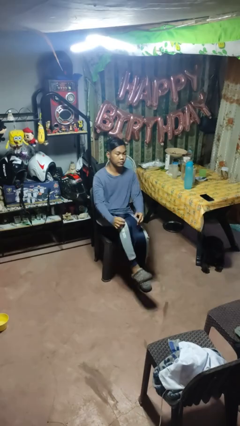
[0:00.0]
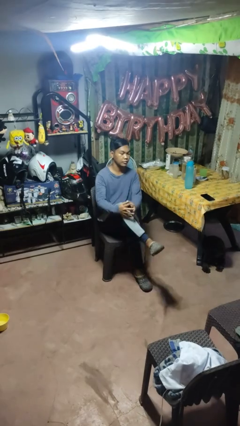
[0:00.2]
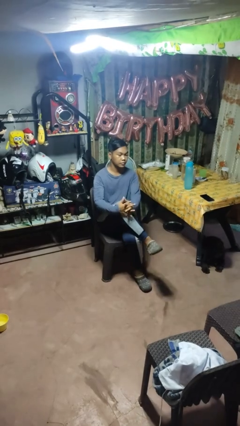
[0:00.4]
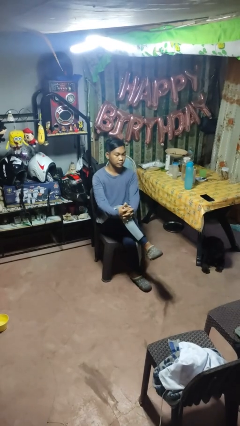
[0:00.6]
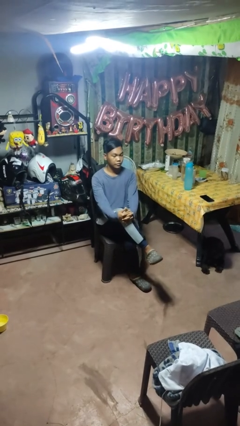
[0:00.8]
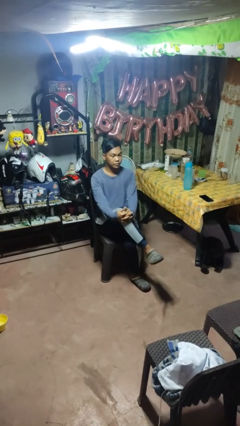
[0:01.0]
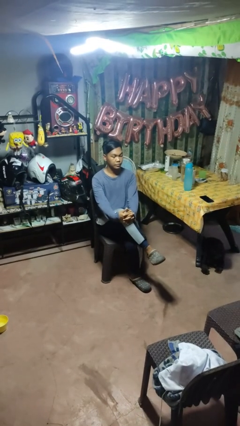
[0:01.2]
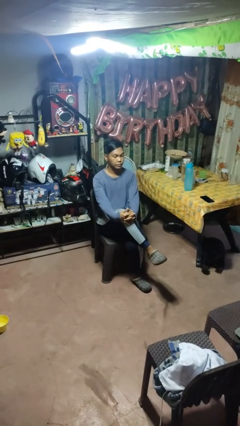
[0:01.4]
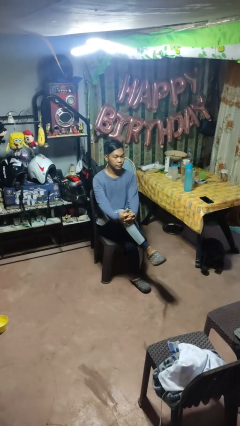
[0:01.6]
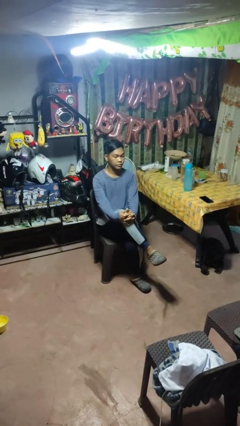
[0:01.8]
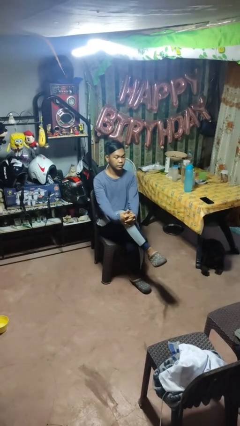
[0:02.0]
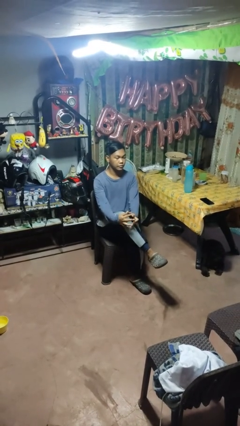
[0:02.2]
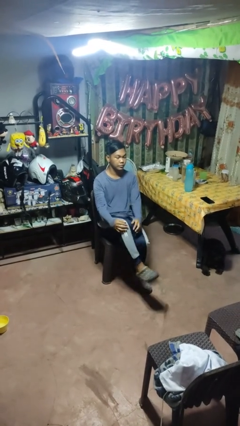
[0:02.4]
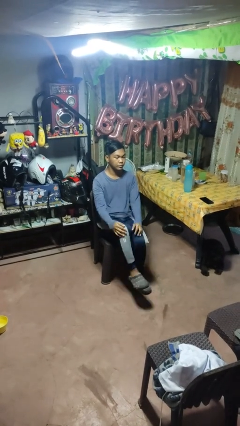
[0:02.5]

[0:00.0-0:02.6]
person crosses legs

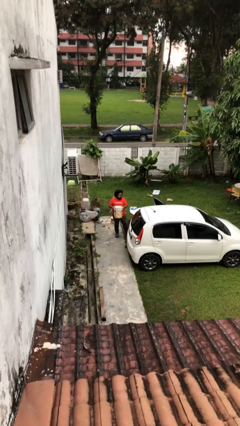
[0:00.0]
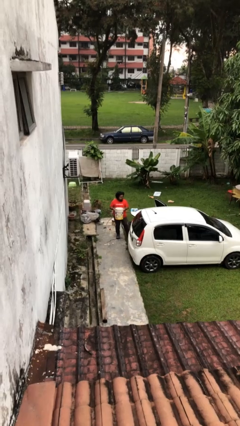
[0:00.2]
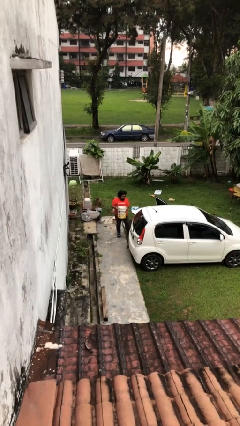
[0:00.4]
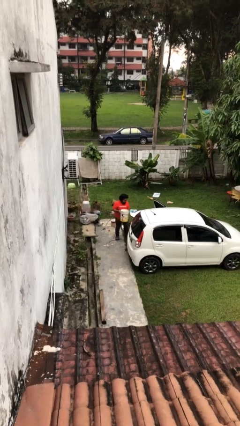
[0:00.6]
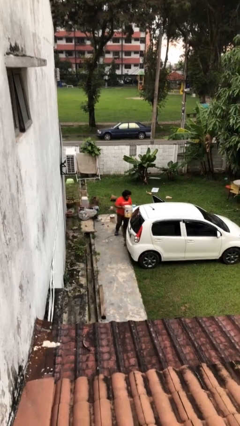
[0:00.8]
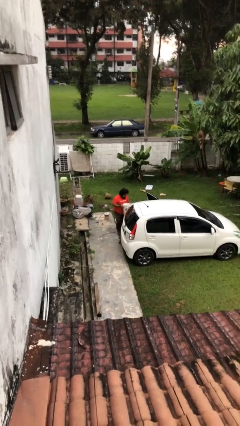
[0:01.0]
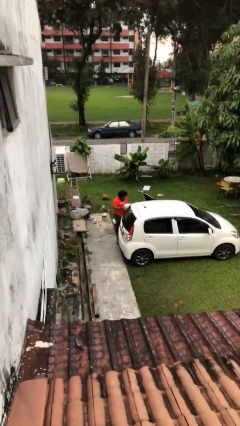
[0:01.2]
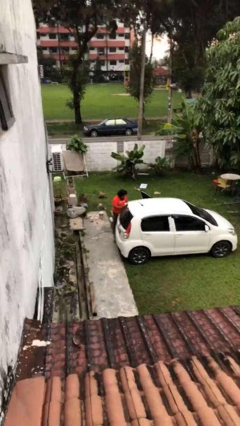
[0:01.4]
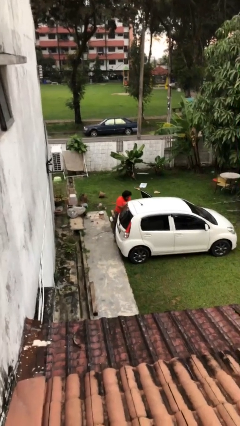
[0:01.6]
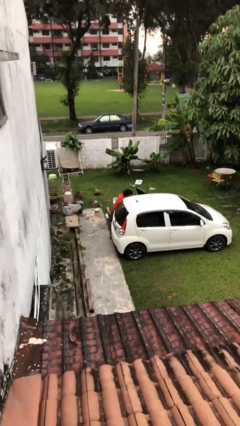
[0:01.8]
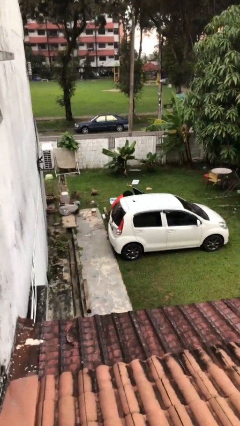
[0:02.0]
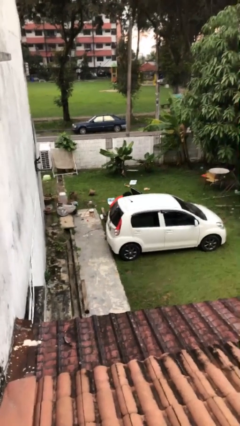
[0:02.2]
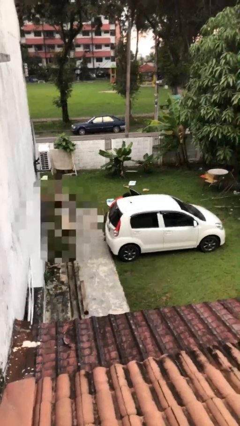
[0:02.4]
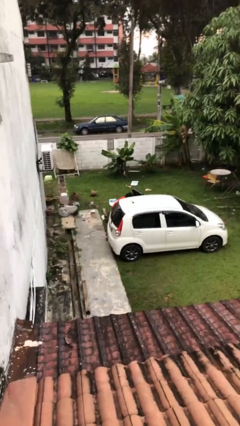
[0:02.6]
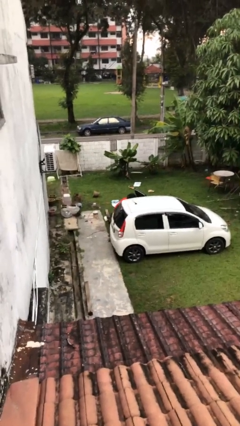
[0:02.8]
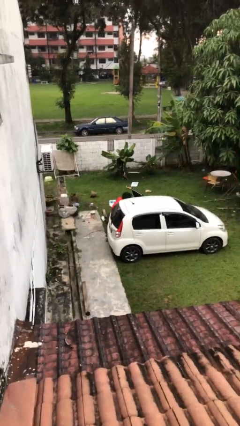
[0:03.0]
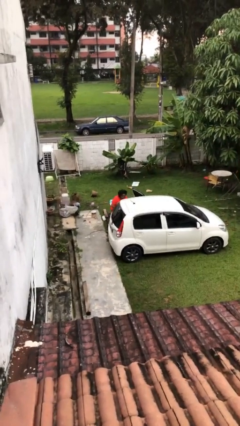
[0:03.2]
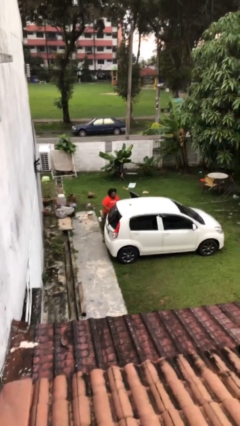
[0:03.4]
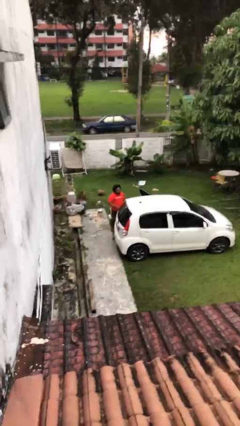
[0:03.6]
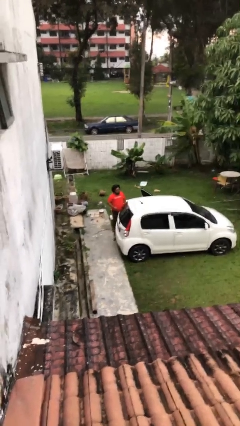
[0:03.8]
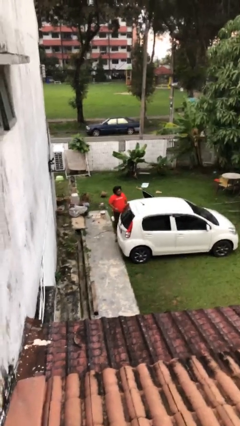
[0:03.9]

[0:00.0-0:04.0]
person loads car

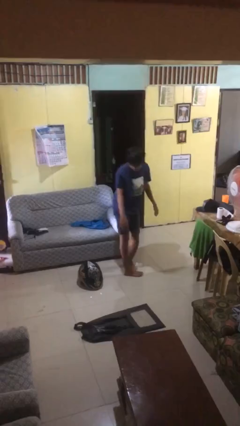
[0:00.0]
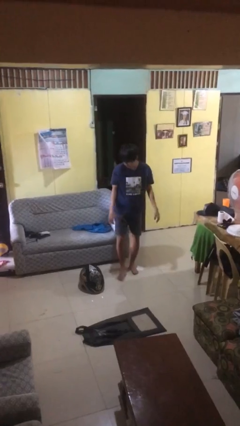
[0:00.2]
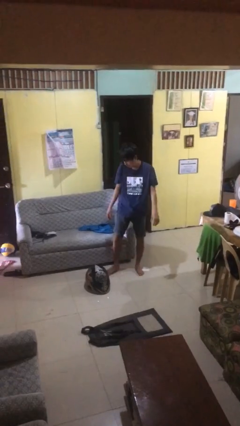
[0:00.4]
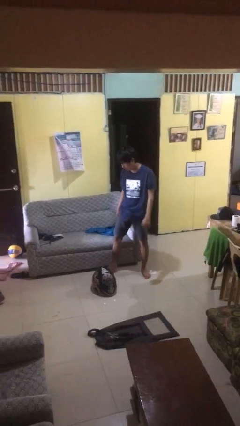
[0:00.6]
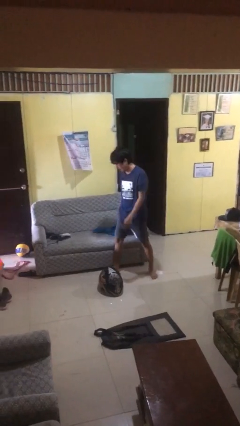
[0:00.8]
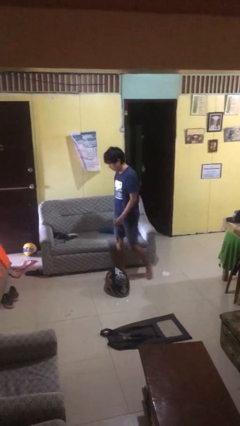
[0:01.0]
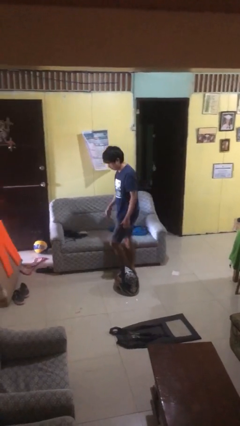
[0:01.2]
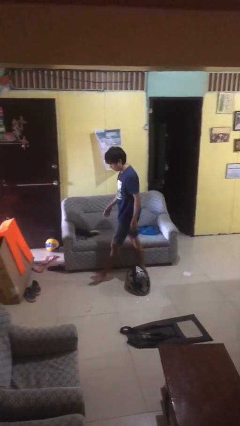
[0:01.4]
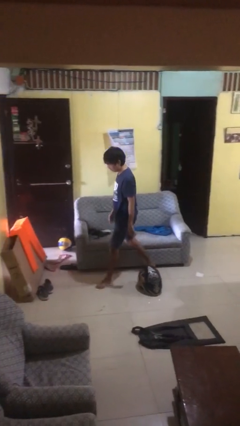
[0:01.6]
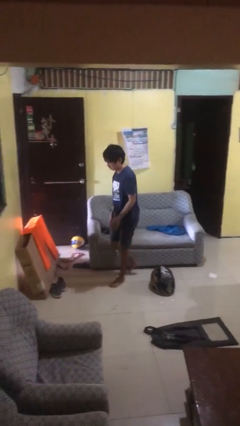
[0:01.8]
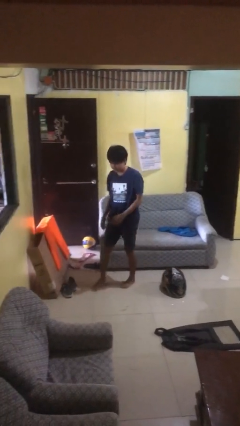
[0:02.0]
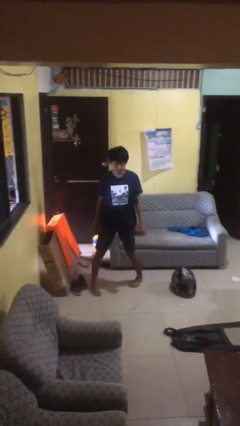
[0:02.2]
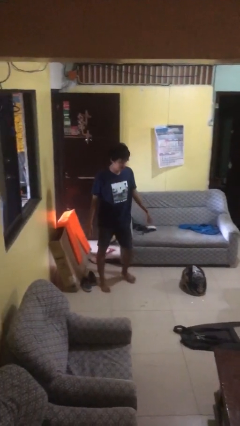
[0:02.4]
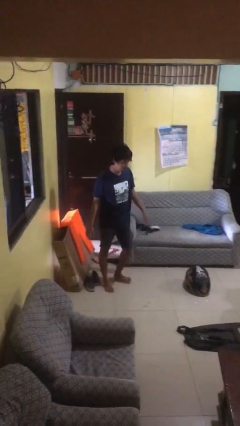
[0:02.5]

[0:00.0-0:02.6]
person stands up from floor

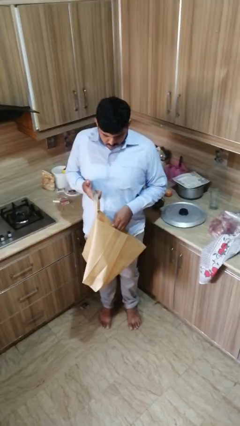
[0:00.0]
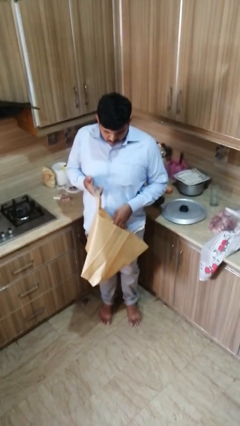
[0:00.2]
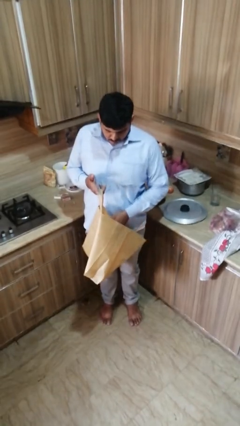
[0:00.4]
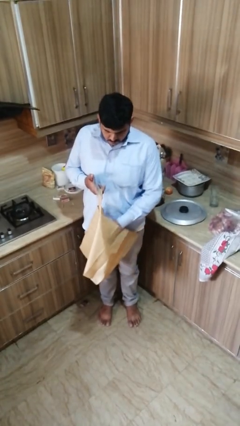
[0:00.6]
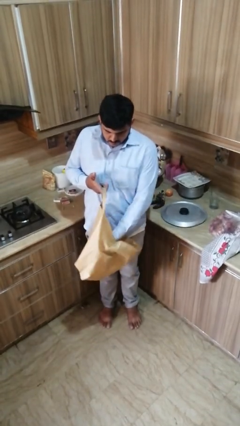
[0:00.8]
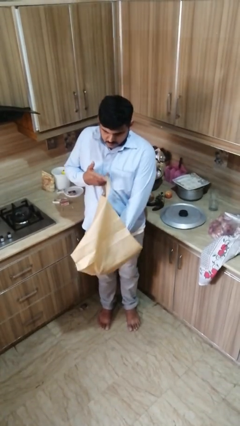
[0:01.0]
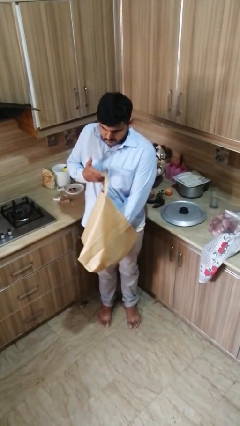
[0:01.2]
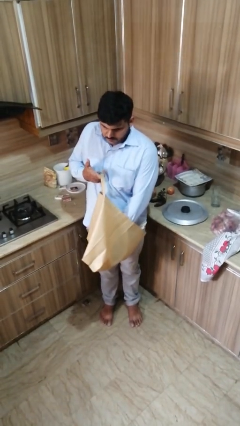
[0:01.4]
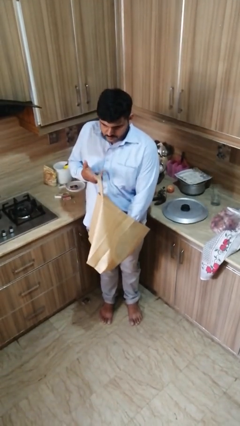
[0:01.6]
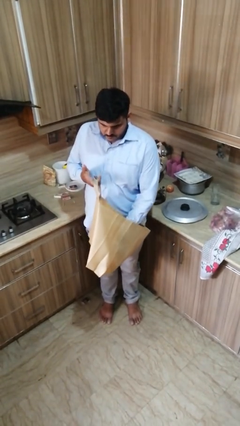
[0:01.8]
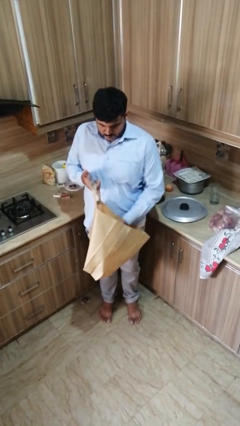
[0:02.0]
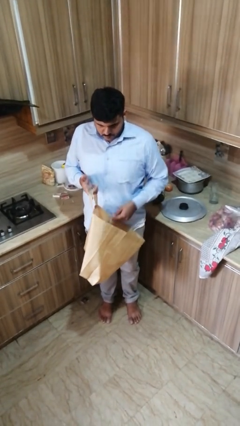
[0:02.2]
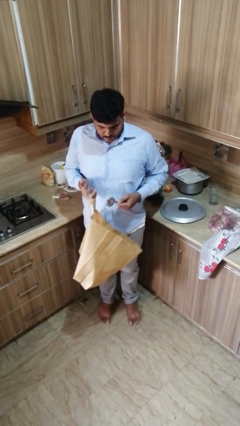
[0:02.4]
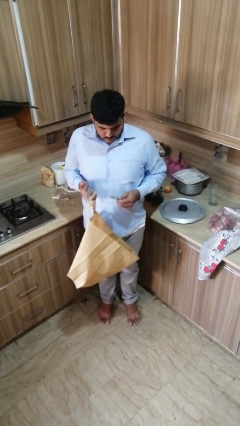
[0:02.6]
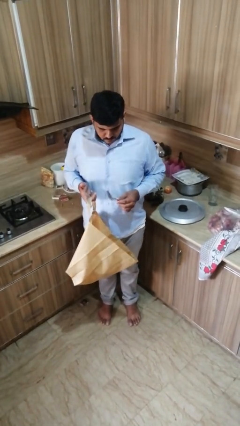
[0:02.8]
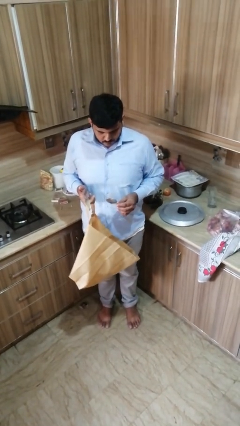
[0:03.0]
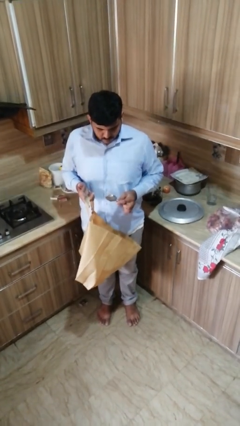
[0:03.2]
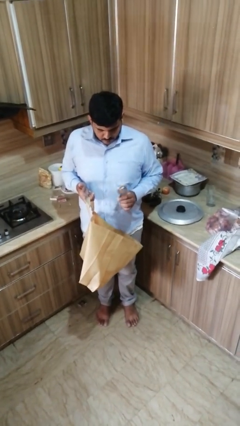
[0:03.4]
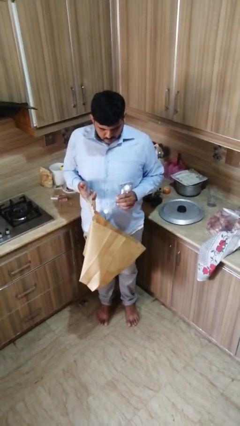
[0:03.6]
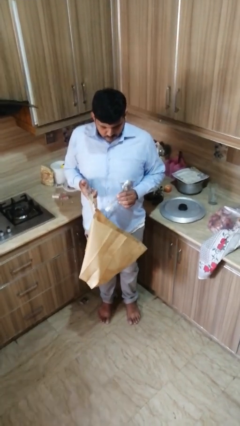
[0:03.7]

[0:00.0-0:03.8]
person takes object from bag

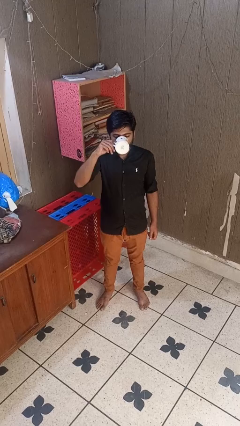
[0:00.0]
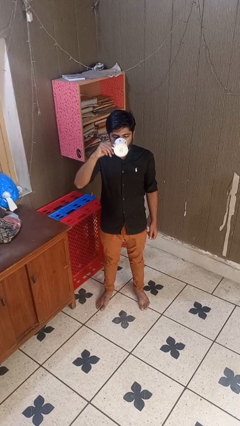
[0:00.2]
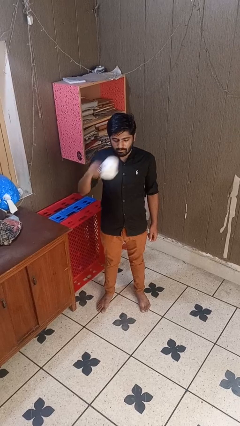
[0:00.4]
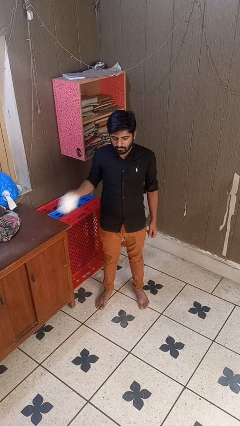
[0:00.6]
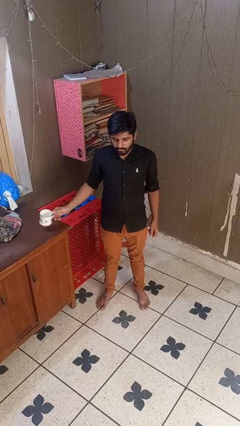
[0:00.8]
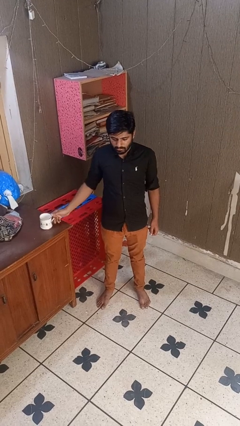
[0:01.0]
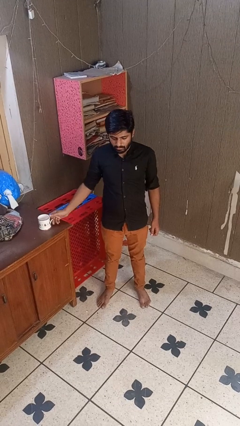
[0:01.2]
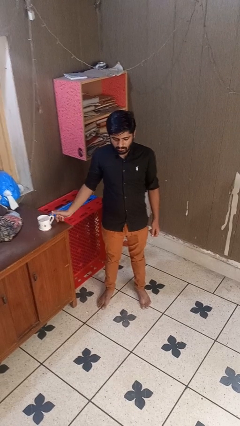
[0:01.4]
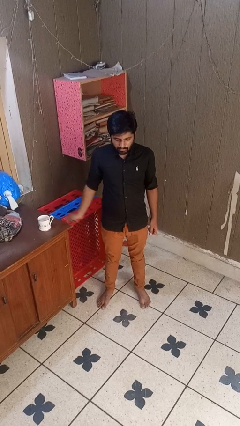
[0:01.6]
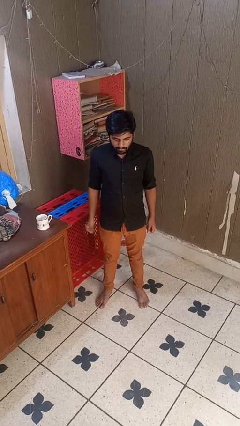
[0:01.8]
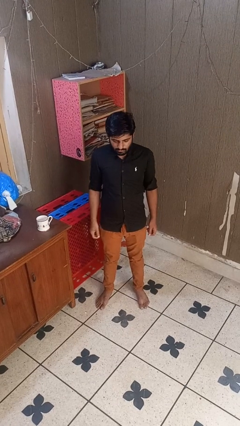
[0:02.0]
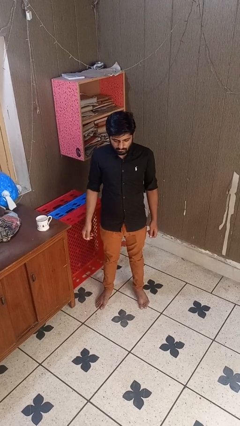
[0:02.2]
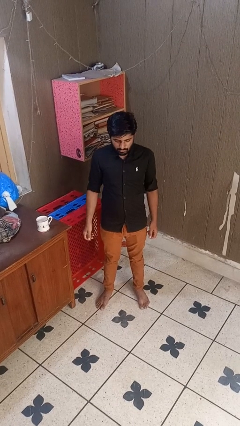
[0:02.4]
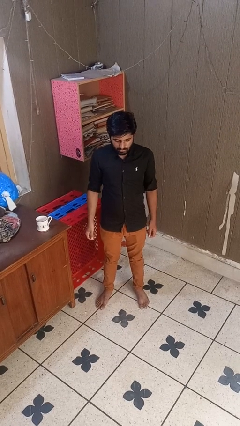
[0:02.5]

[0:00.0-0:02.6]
person puts down object on table

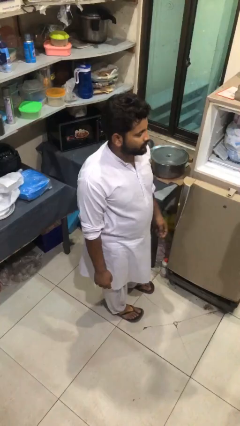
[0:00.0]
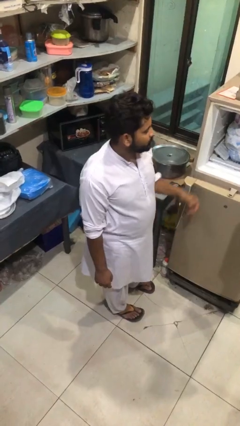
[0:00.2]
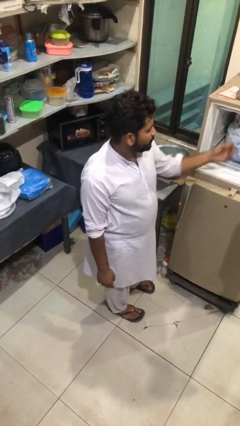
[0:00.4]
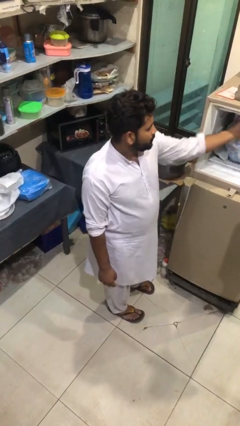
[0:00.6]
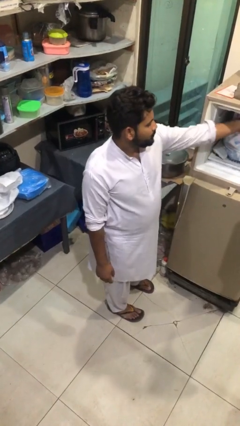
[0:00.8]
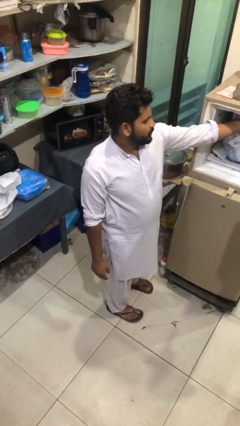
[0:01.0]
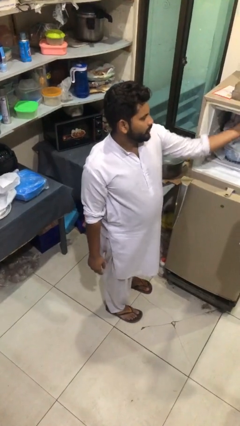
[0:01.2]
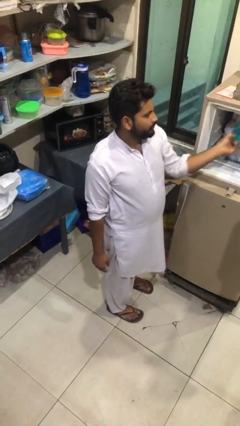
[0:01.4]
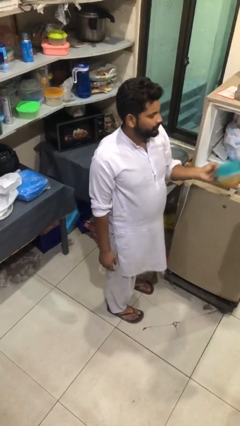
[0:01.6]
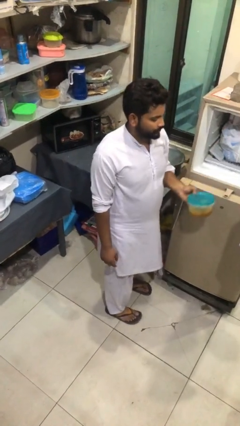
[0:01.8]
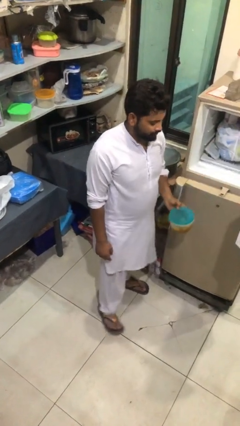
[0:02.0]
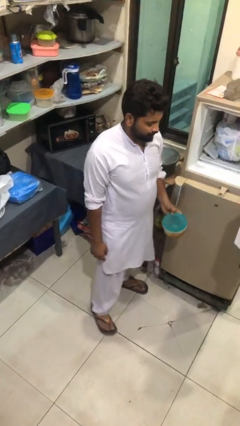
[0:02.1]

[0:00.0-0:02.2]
person takes object from refrigerator
